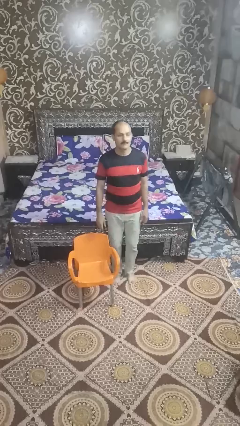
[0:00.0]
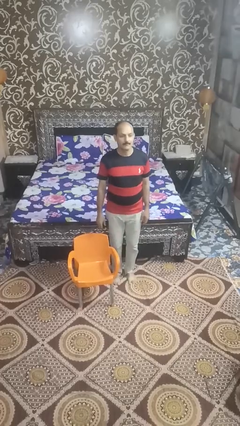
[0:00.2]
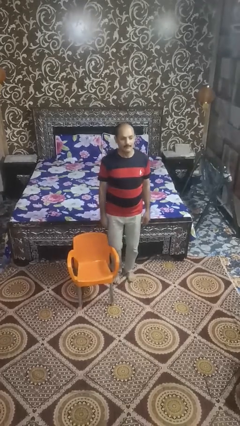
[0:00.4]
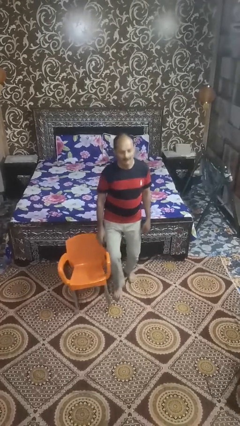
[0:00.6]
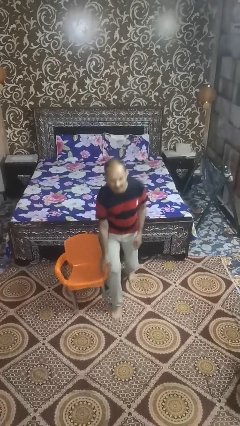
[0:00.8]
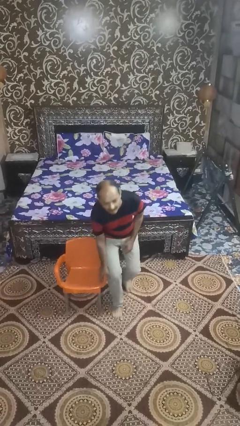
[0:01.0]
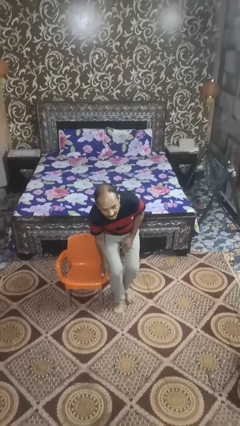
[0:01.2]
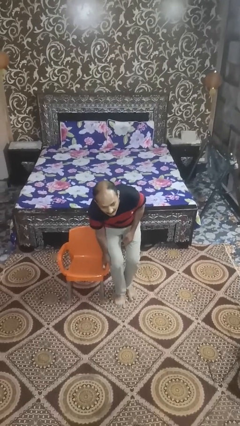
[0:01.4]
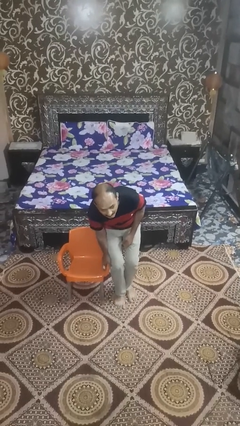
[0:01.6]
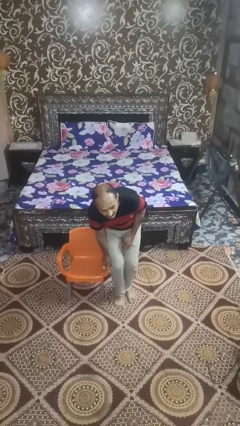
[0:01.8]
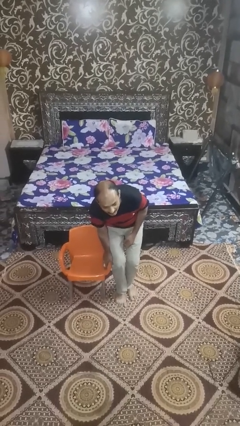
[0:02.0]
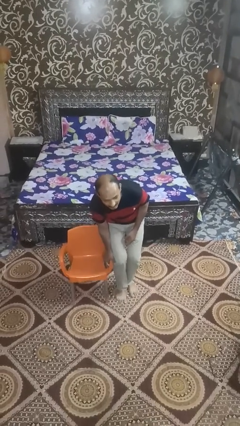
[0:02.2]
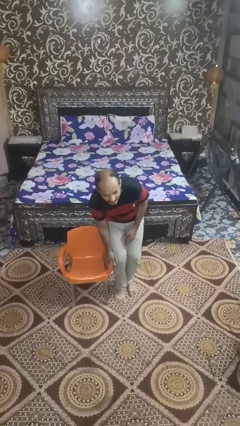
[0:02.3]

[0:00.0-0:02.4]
person trips on object on floor

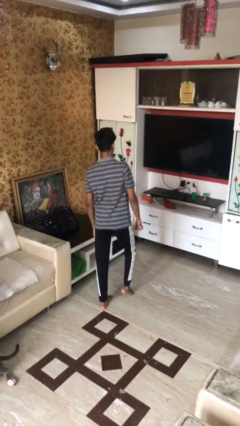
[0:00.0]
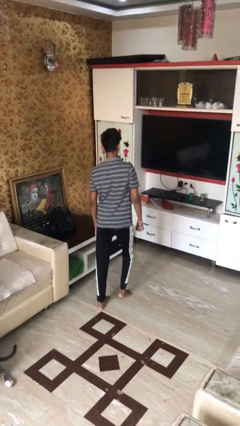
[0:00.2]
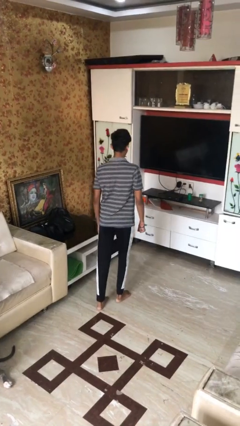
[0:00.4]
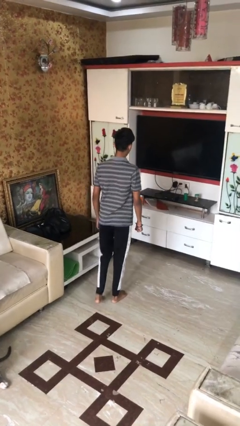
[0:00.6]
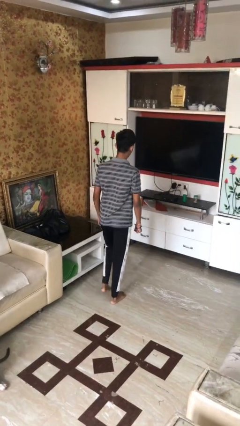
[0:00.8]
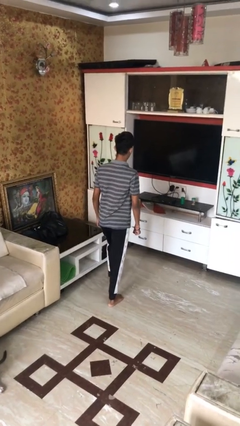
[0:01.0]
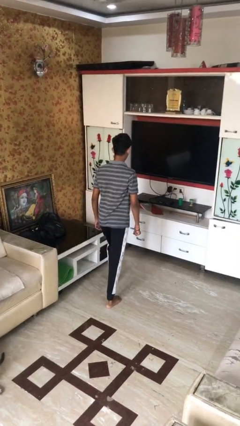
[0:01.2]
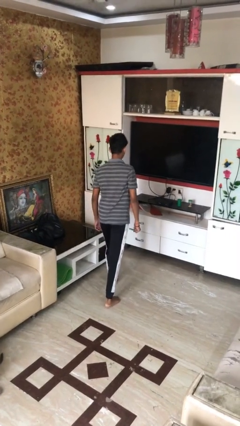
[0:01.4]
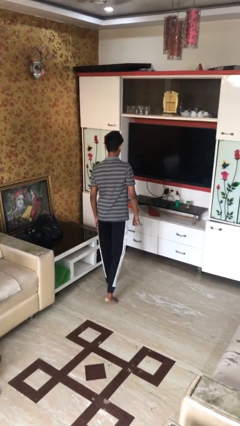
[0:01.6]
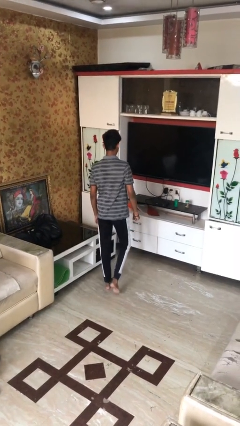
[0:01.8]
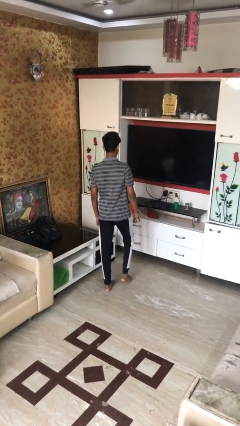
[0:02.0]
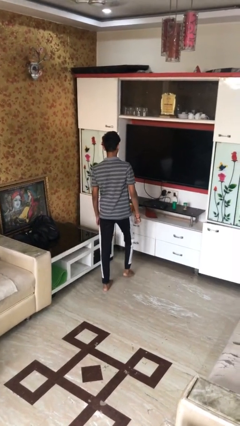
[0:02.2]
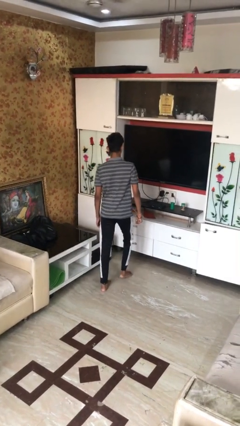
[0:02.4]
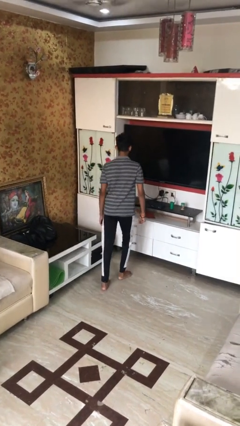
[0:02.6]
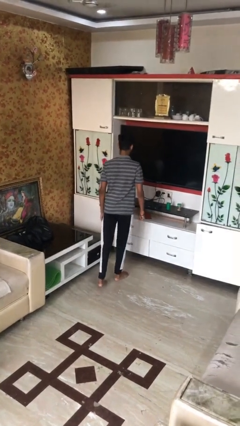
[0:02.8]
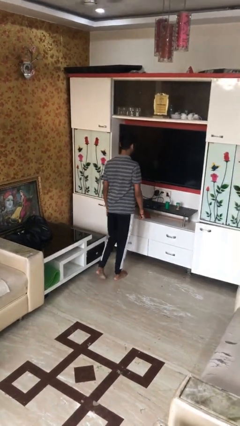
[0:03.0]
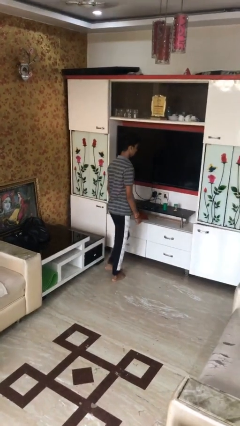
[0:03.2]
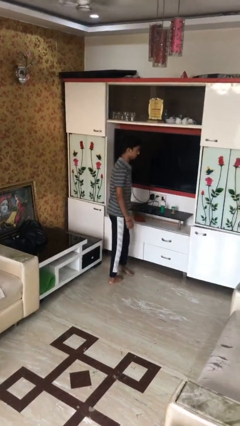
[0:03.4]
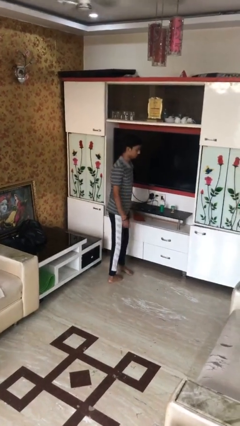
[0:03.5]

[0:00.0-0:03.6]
person walks tiptoe

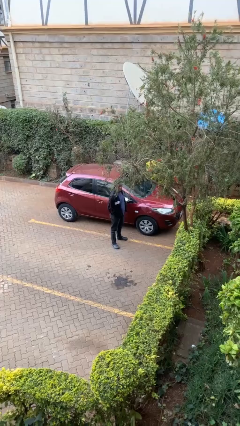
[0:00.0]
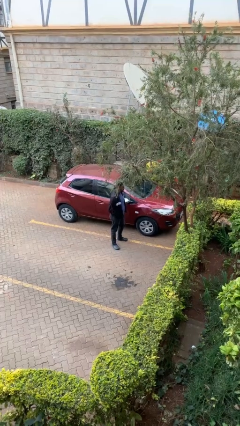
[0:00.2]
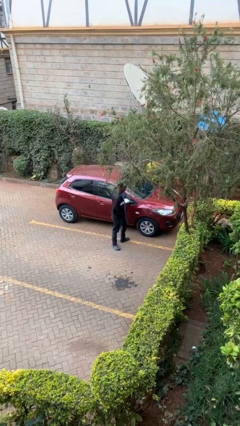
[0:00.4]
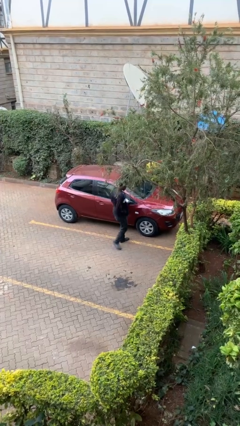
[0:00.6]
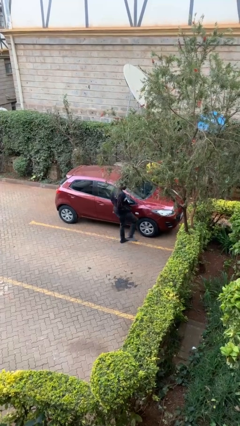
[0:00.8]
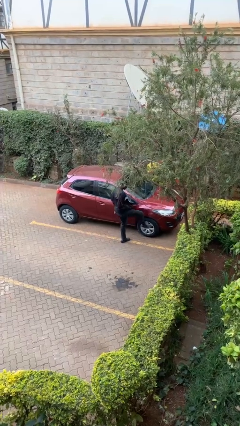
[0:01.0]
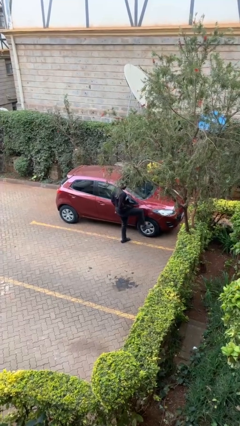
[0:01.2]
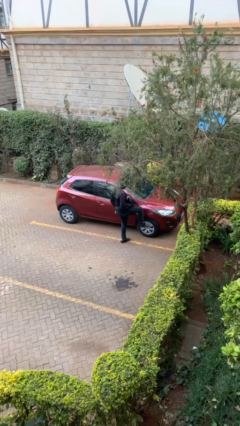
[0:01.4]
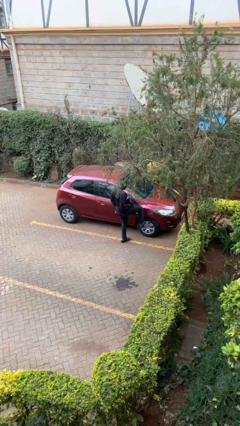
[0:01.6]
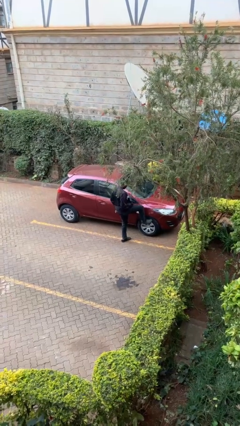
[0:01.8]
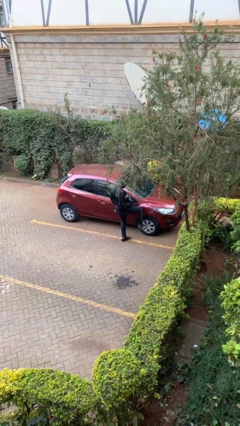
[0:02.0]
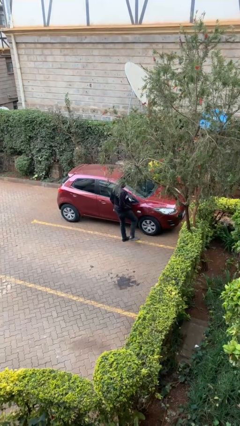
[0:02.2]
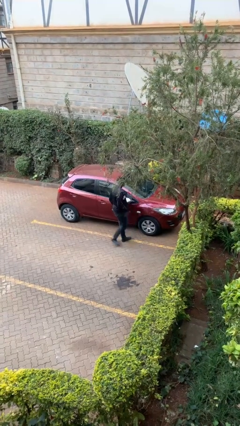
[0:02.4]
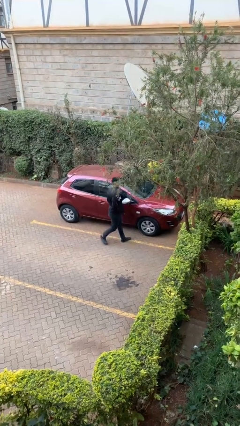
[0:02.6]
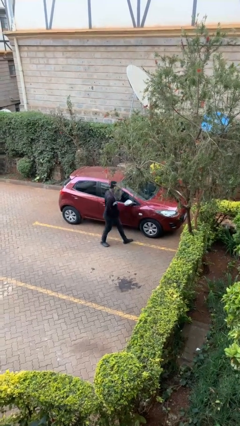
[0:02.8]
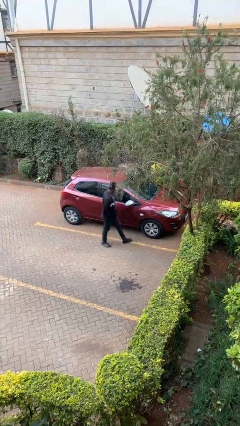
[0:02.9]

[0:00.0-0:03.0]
person kicks car tires

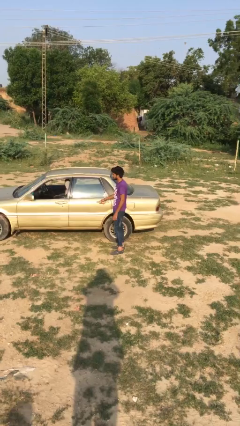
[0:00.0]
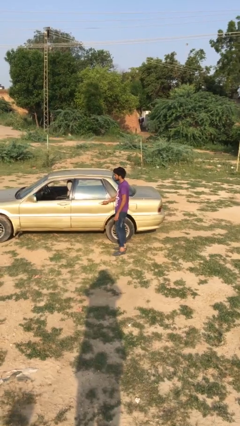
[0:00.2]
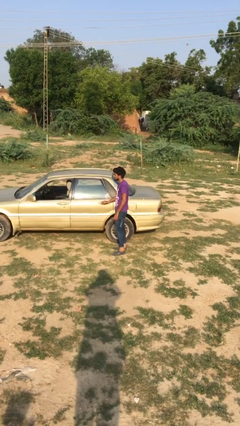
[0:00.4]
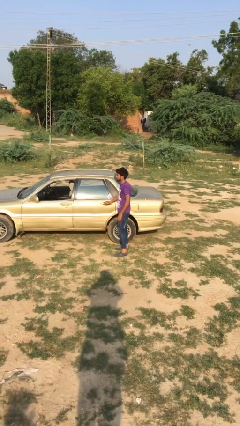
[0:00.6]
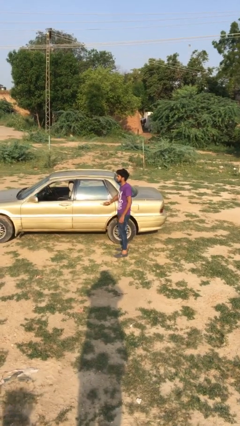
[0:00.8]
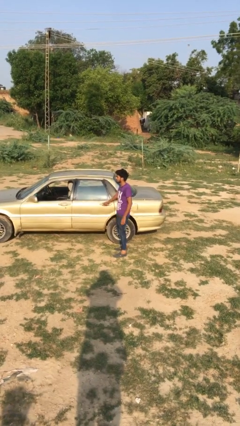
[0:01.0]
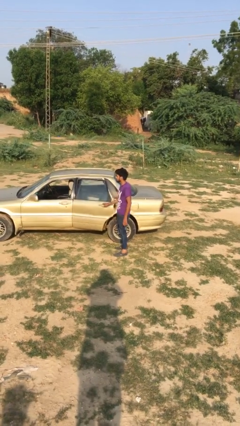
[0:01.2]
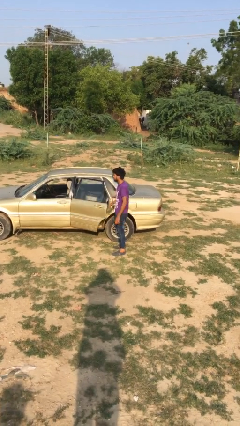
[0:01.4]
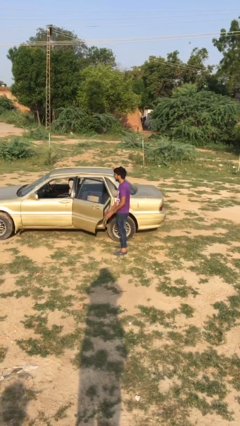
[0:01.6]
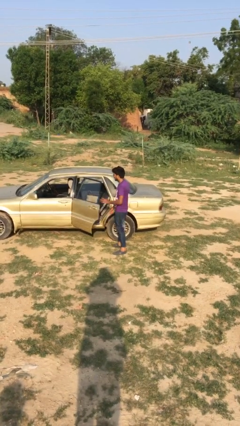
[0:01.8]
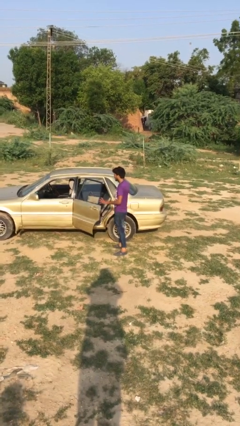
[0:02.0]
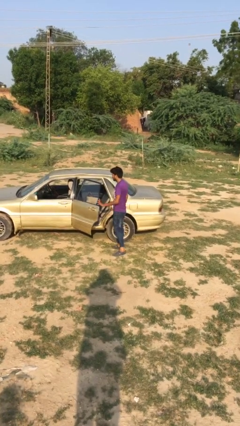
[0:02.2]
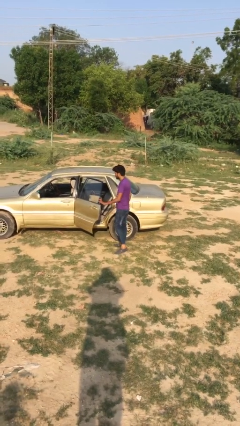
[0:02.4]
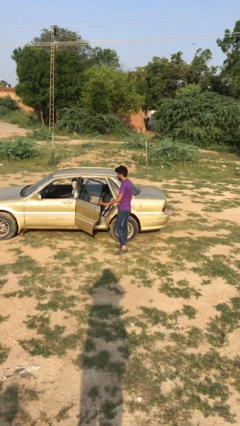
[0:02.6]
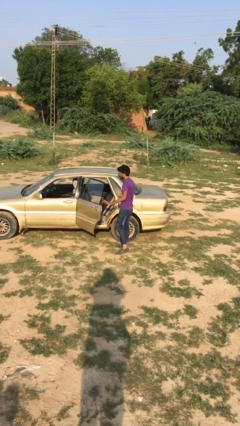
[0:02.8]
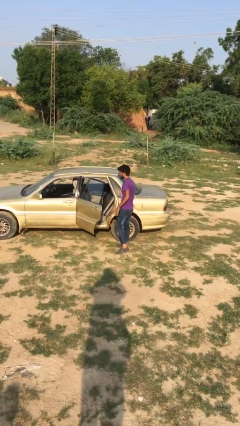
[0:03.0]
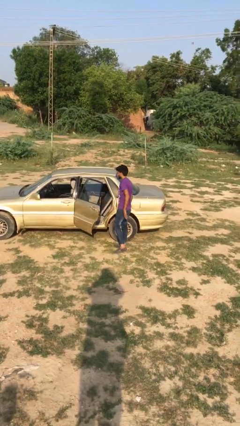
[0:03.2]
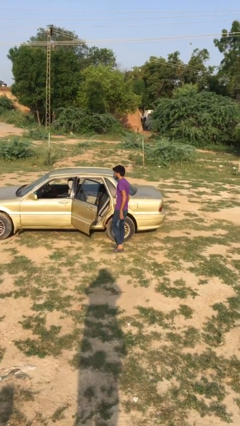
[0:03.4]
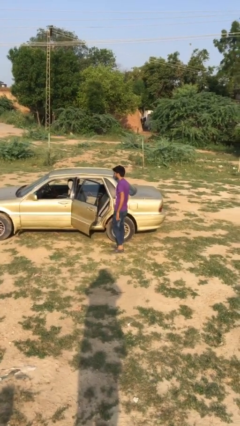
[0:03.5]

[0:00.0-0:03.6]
person opens car door

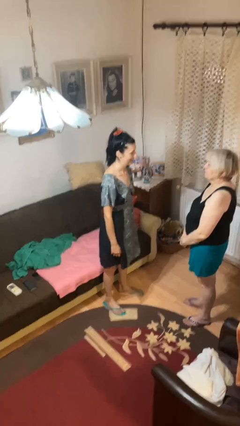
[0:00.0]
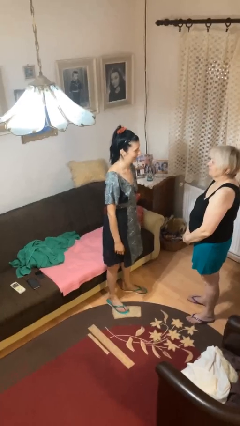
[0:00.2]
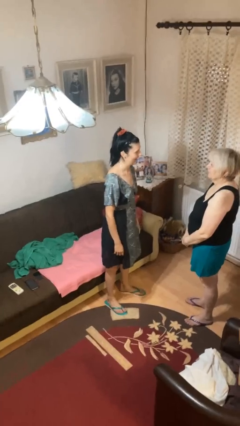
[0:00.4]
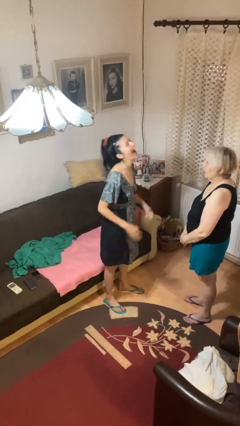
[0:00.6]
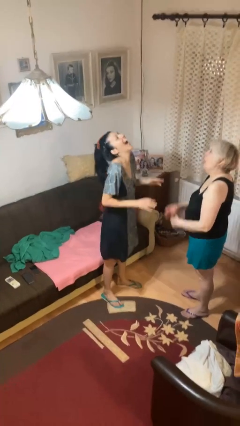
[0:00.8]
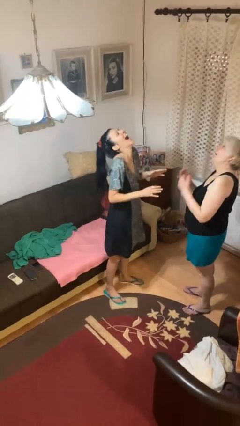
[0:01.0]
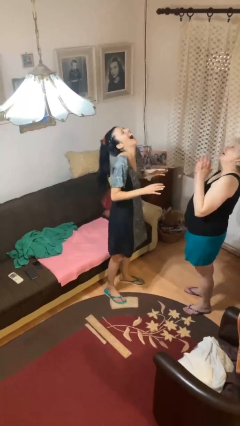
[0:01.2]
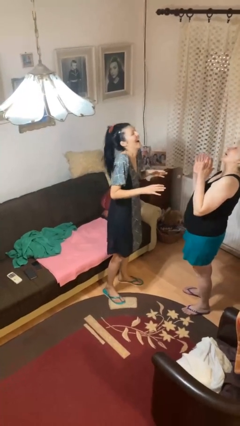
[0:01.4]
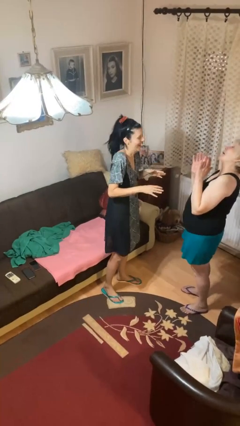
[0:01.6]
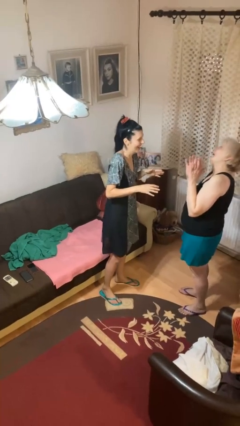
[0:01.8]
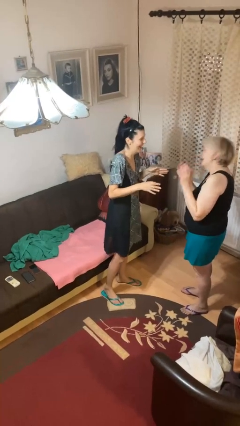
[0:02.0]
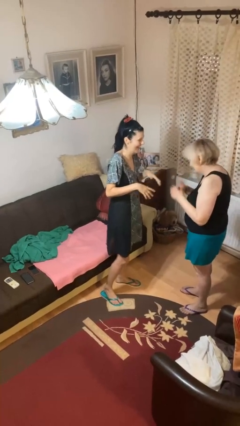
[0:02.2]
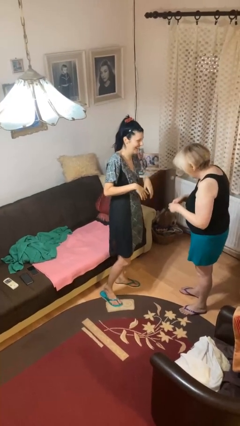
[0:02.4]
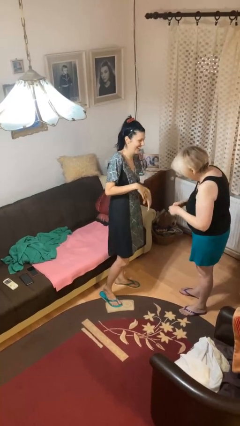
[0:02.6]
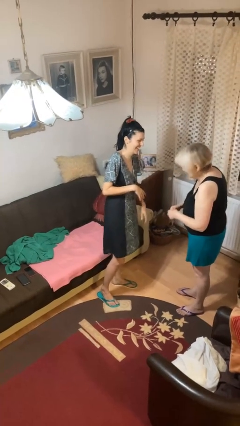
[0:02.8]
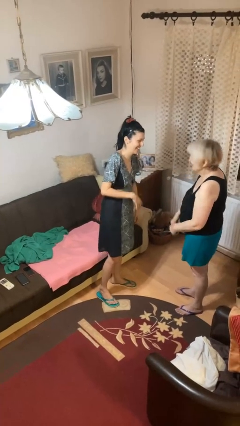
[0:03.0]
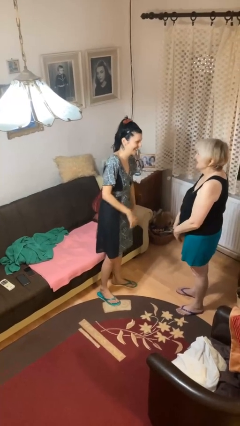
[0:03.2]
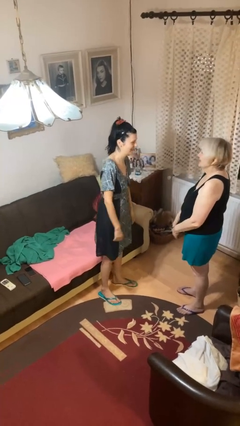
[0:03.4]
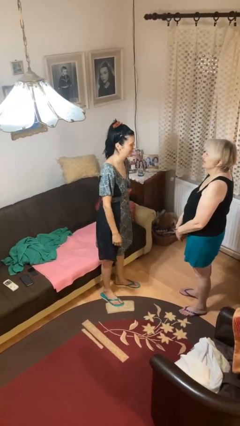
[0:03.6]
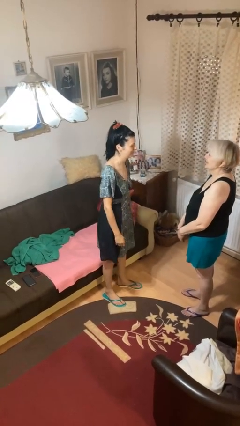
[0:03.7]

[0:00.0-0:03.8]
person laughs with person

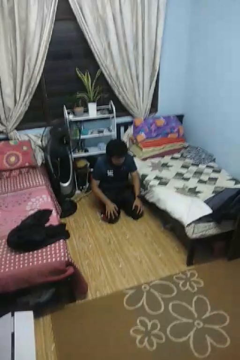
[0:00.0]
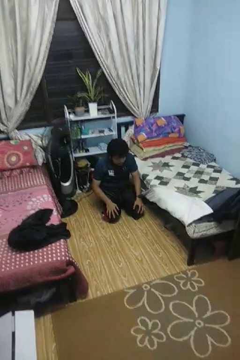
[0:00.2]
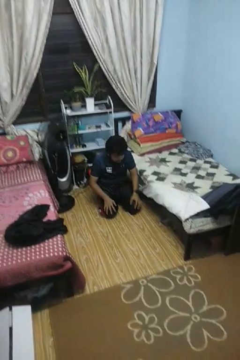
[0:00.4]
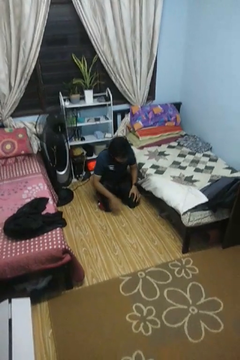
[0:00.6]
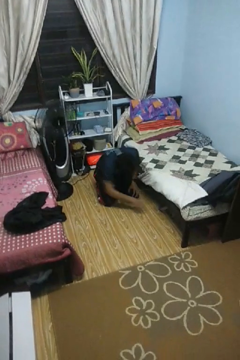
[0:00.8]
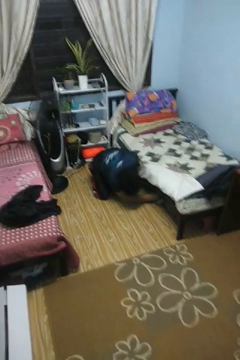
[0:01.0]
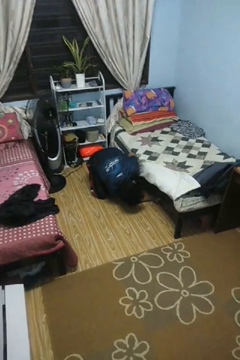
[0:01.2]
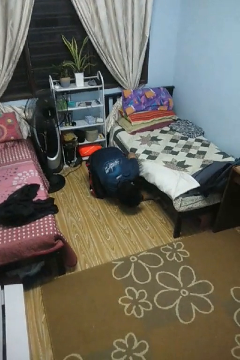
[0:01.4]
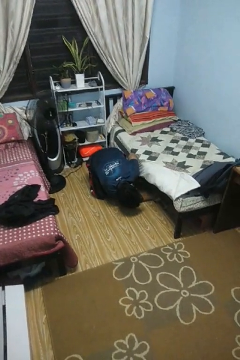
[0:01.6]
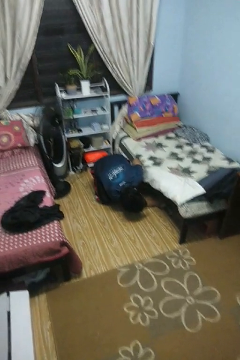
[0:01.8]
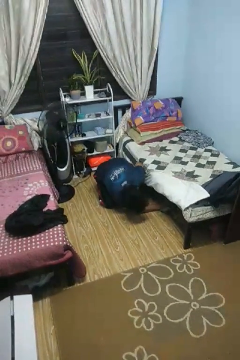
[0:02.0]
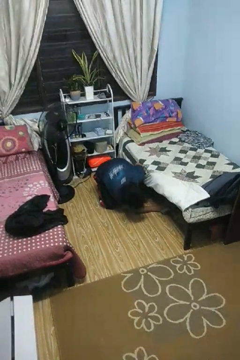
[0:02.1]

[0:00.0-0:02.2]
person searches under bed
